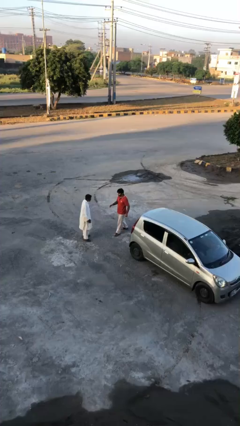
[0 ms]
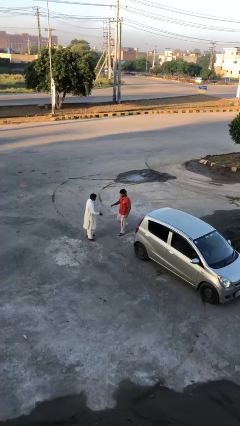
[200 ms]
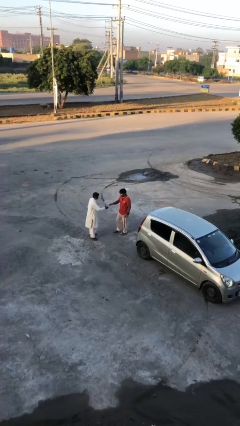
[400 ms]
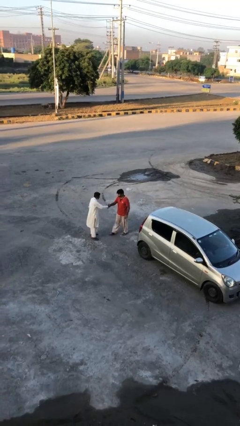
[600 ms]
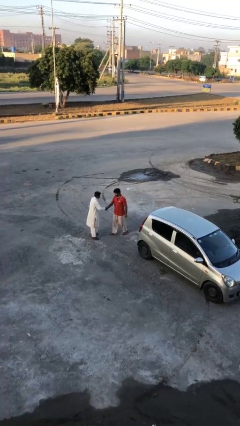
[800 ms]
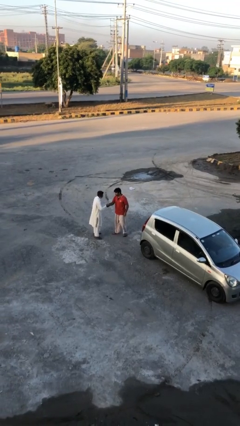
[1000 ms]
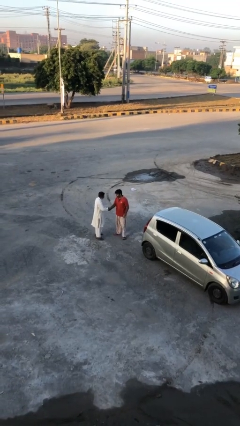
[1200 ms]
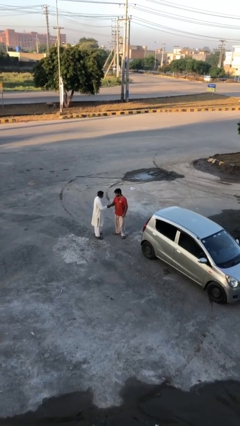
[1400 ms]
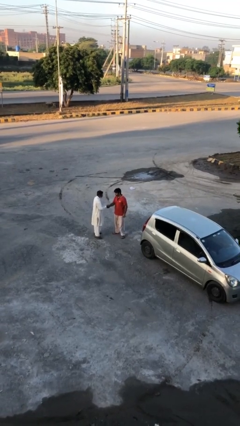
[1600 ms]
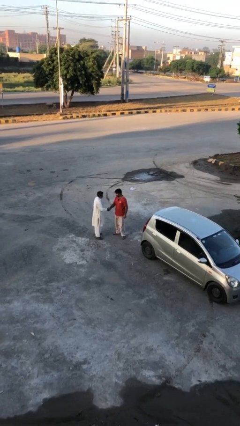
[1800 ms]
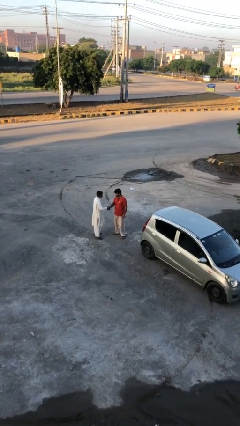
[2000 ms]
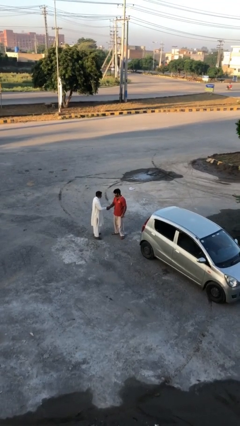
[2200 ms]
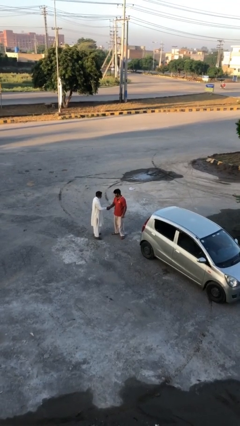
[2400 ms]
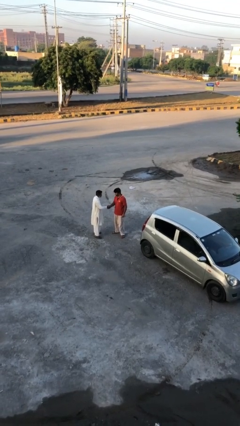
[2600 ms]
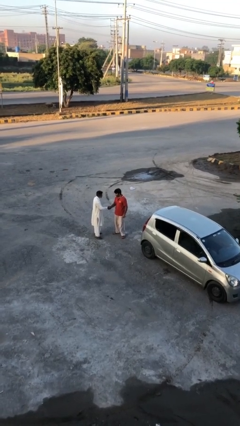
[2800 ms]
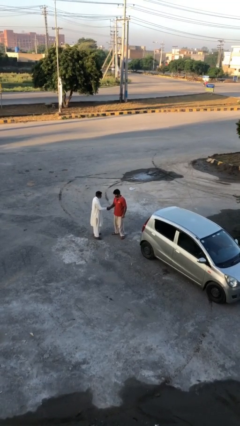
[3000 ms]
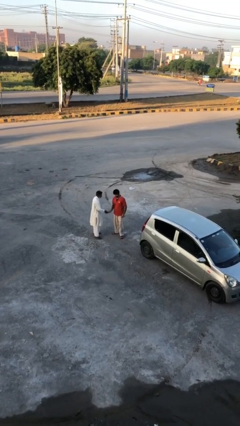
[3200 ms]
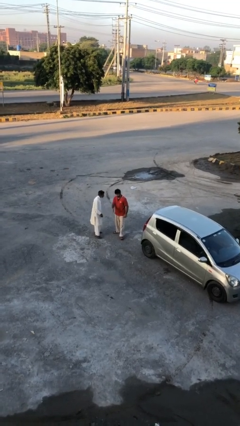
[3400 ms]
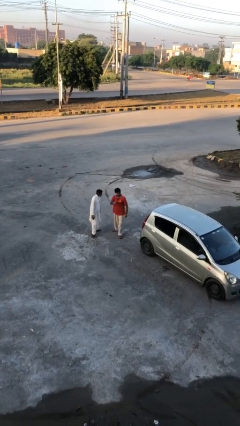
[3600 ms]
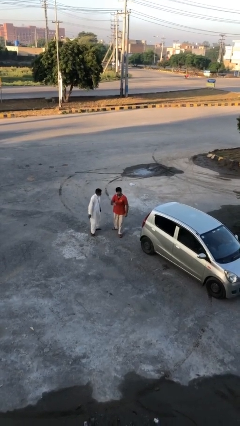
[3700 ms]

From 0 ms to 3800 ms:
person shakes hand

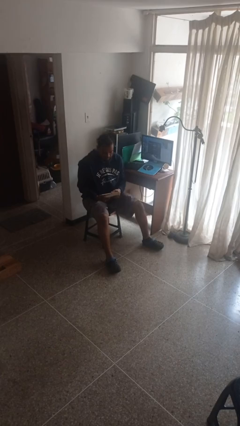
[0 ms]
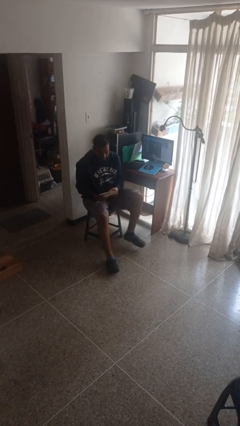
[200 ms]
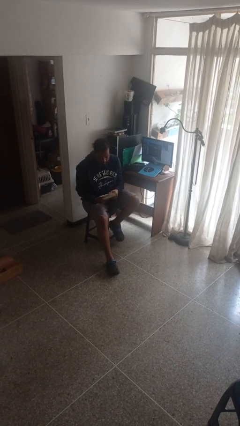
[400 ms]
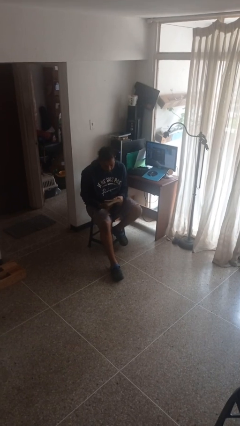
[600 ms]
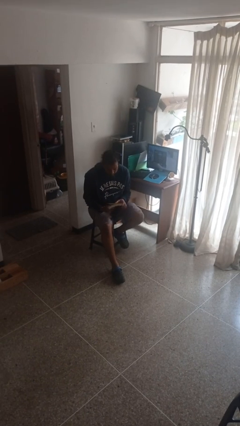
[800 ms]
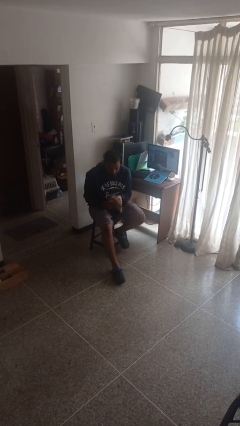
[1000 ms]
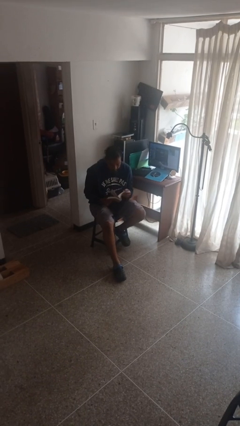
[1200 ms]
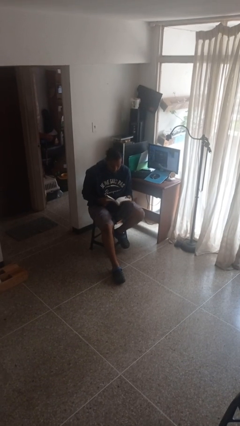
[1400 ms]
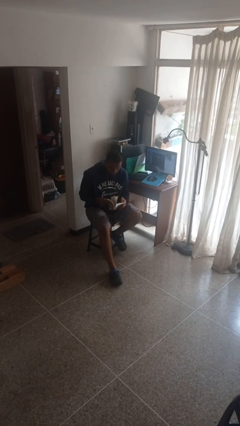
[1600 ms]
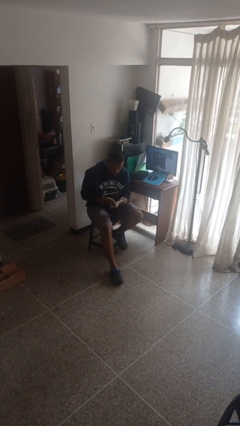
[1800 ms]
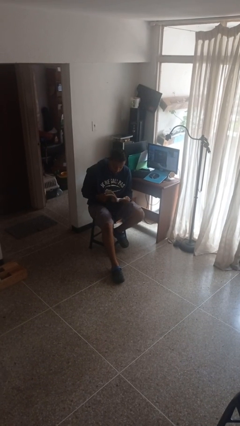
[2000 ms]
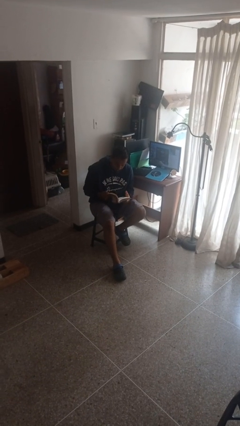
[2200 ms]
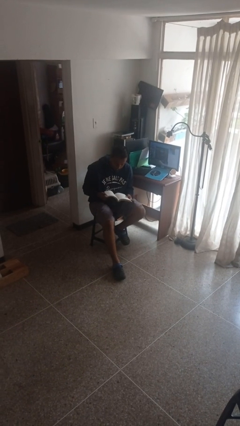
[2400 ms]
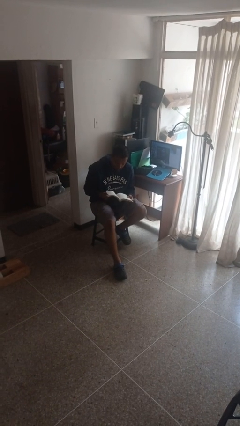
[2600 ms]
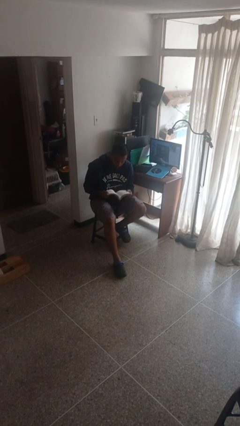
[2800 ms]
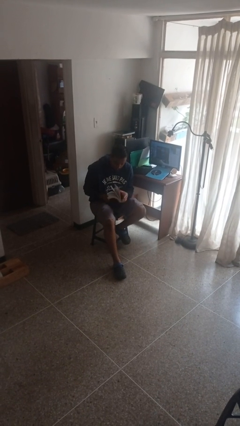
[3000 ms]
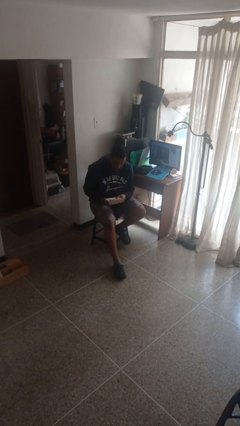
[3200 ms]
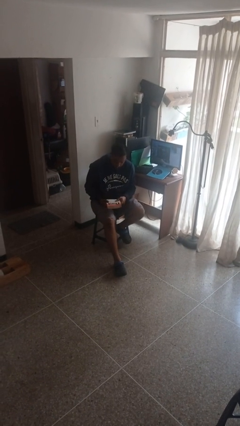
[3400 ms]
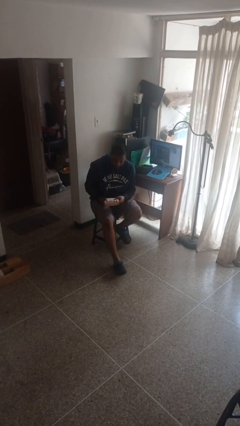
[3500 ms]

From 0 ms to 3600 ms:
person reads book

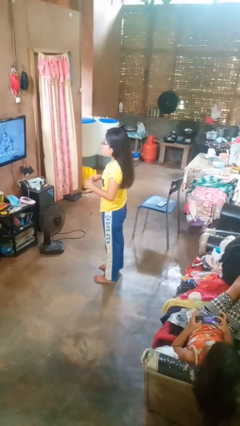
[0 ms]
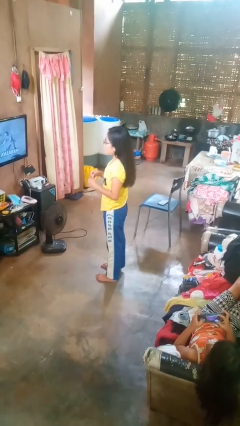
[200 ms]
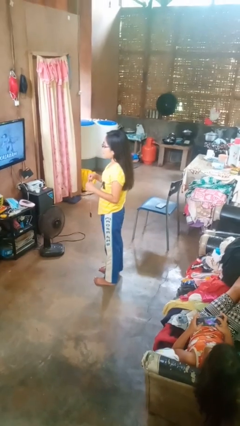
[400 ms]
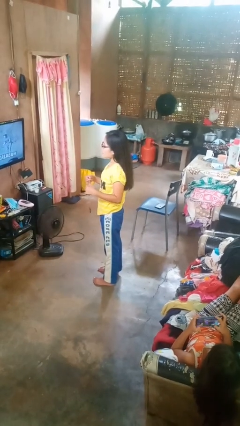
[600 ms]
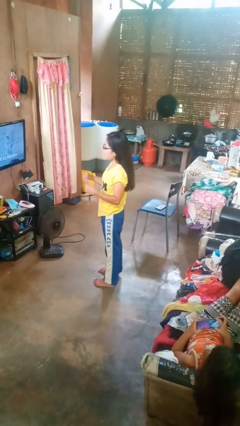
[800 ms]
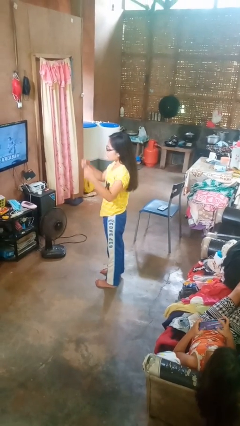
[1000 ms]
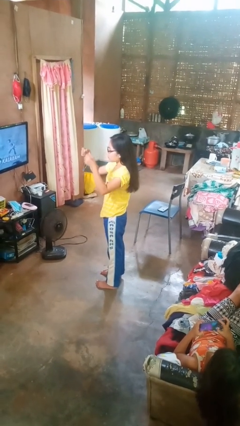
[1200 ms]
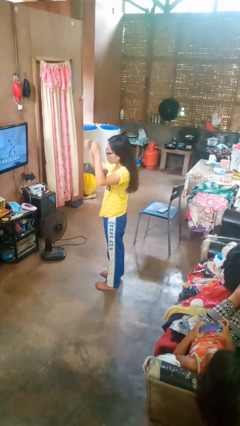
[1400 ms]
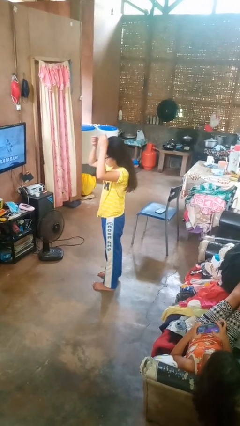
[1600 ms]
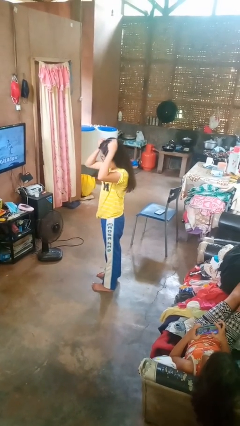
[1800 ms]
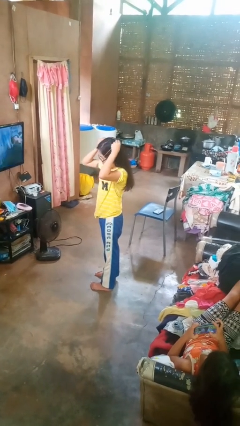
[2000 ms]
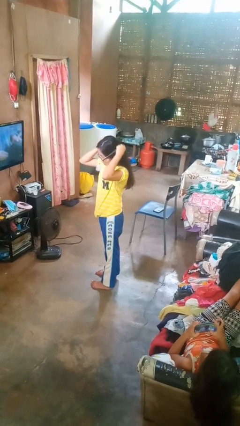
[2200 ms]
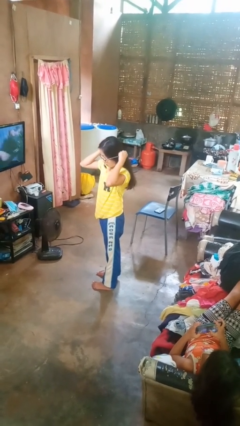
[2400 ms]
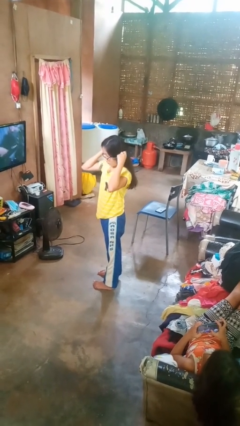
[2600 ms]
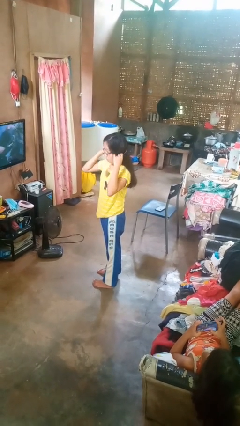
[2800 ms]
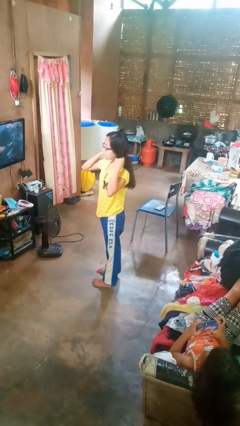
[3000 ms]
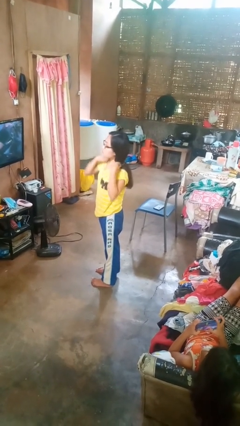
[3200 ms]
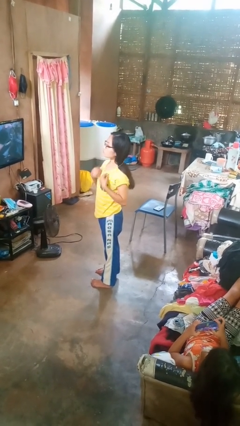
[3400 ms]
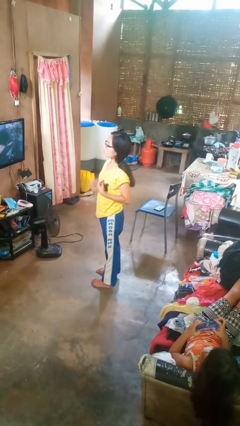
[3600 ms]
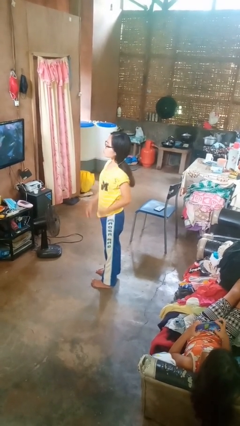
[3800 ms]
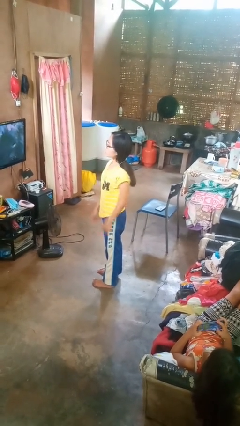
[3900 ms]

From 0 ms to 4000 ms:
person puts on necklace

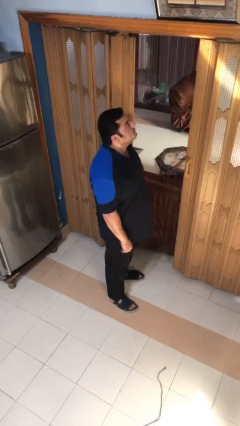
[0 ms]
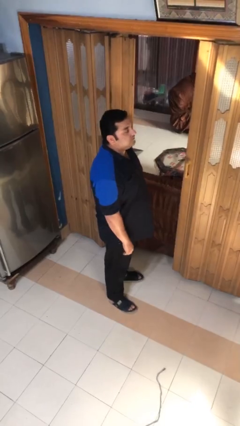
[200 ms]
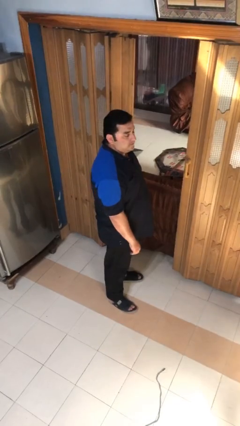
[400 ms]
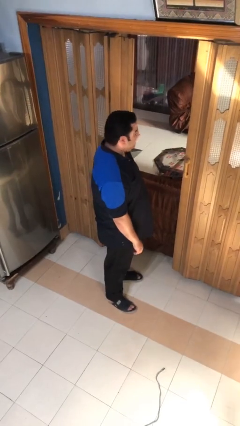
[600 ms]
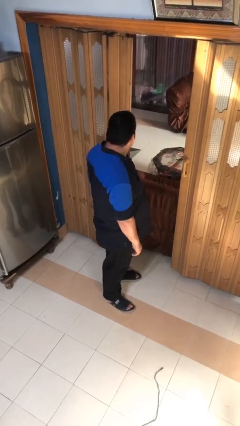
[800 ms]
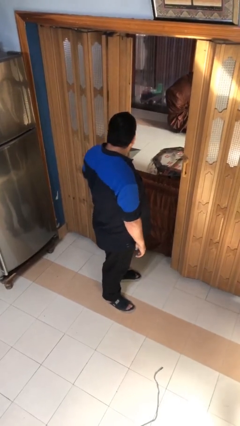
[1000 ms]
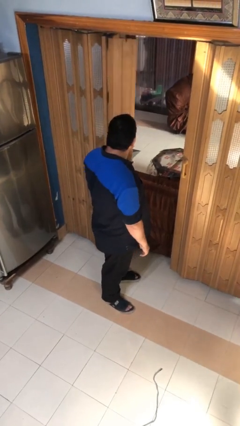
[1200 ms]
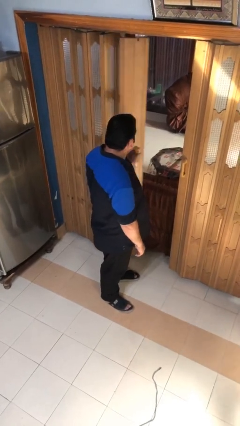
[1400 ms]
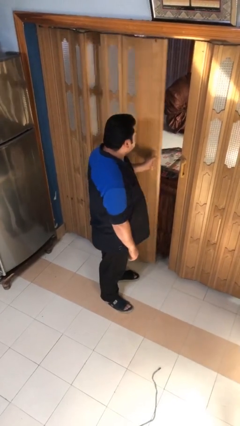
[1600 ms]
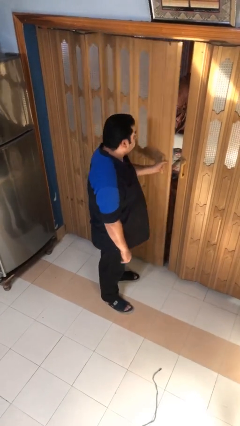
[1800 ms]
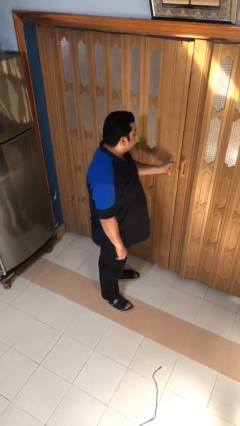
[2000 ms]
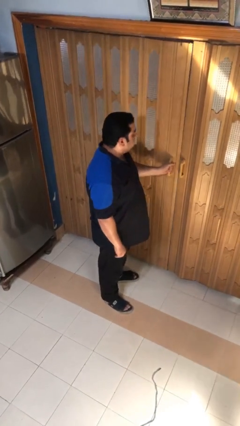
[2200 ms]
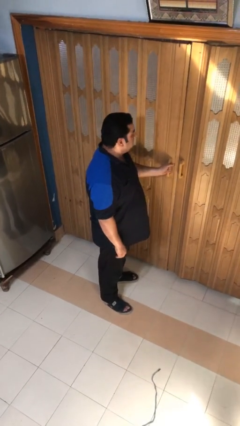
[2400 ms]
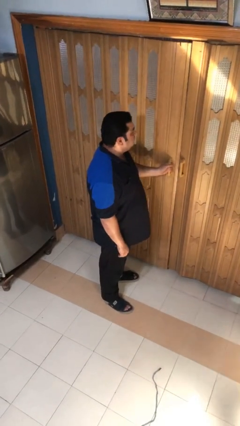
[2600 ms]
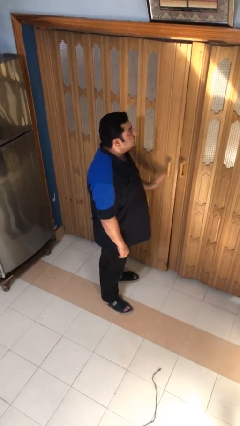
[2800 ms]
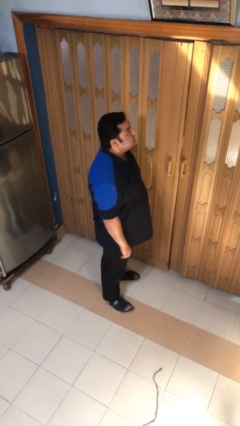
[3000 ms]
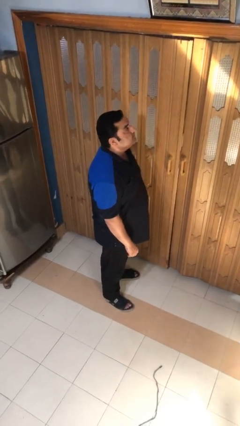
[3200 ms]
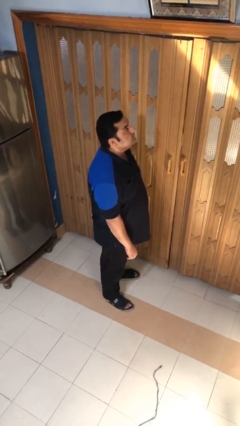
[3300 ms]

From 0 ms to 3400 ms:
person closes sliding door

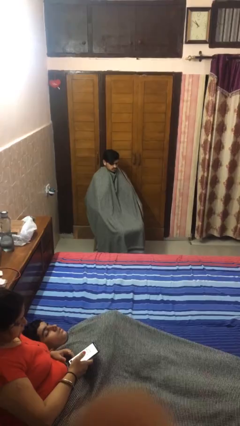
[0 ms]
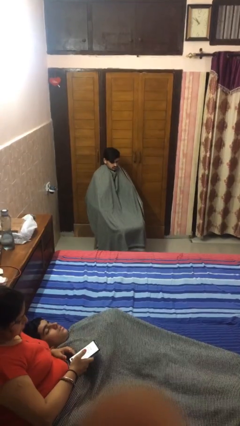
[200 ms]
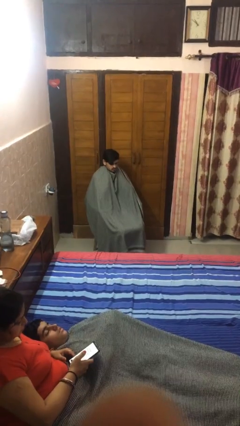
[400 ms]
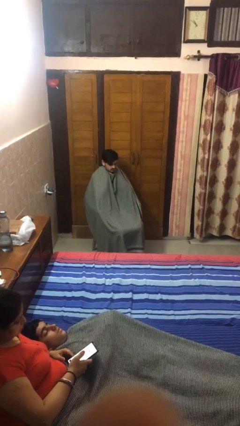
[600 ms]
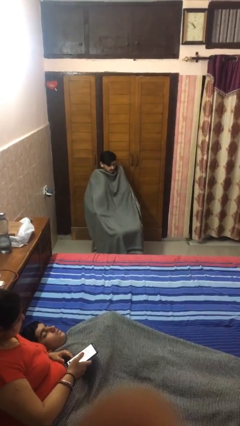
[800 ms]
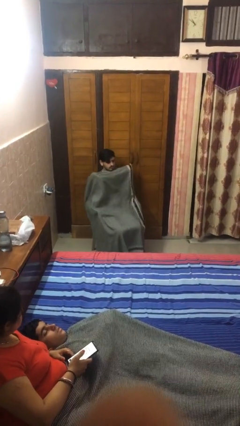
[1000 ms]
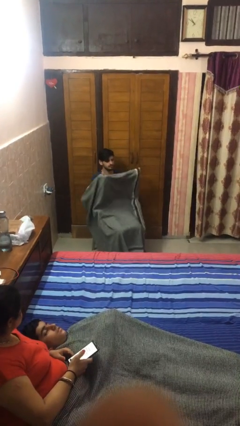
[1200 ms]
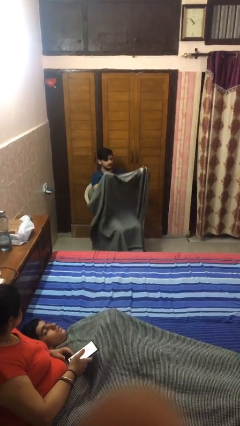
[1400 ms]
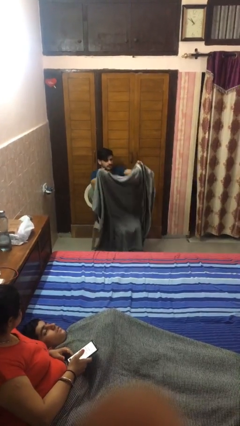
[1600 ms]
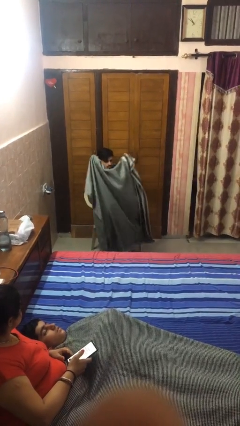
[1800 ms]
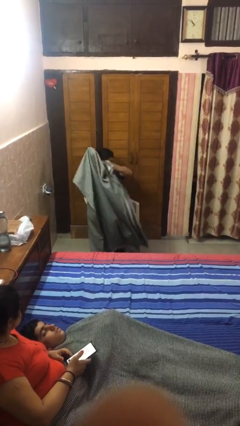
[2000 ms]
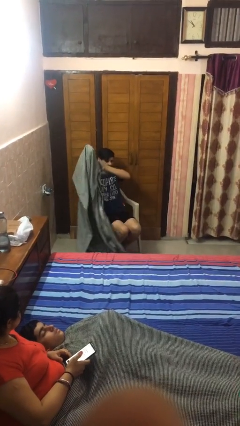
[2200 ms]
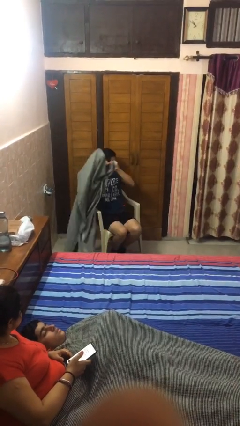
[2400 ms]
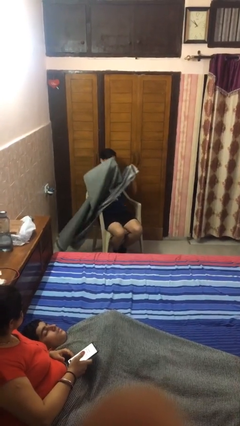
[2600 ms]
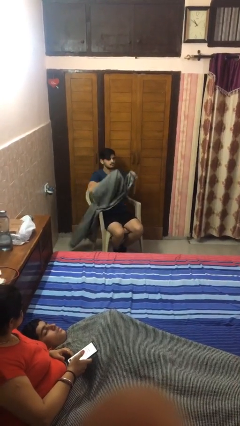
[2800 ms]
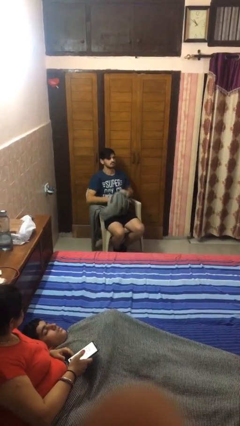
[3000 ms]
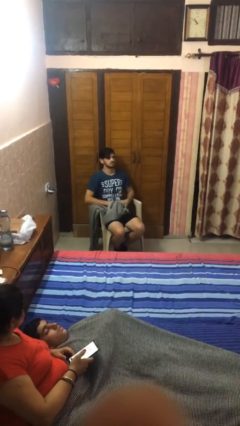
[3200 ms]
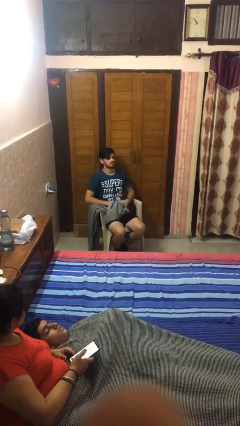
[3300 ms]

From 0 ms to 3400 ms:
person uncovers with blanket
